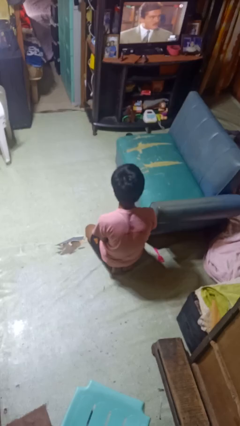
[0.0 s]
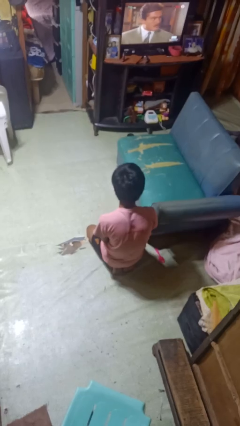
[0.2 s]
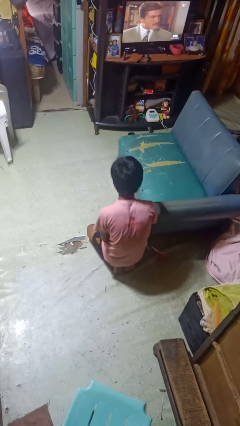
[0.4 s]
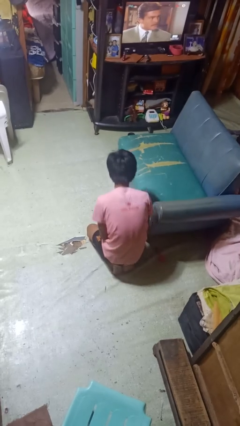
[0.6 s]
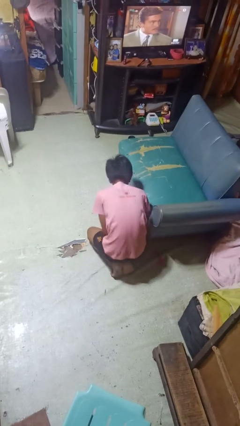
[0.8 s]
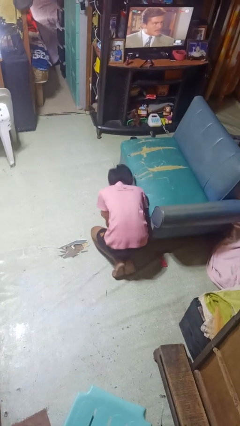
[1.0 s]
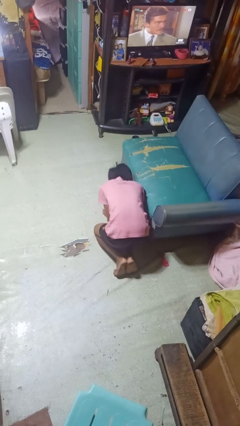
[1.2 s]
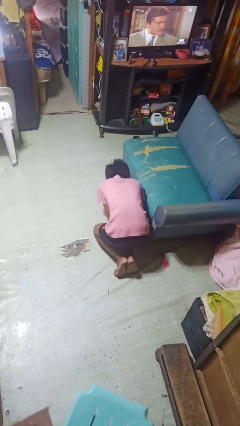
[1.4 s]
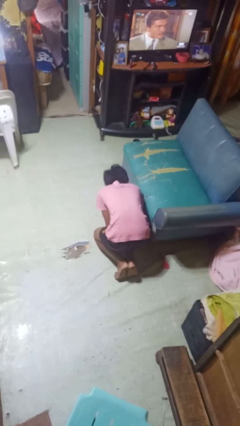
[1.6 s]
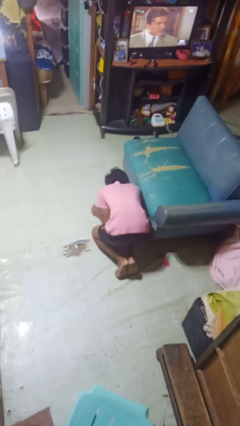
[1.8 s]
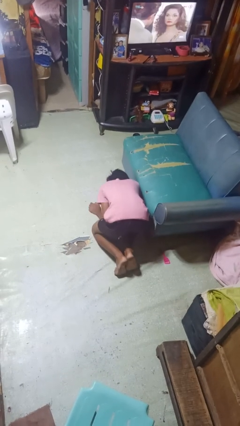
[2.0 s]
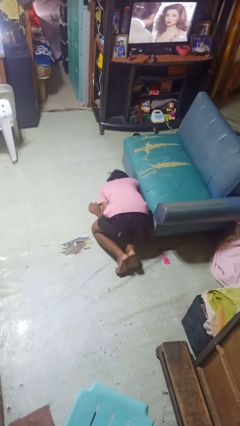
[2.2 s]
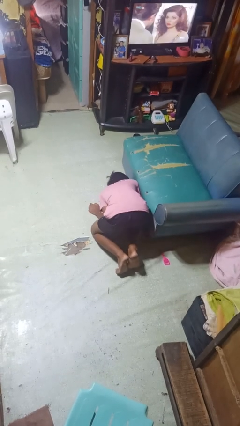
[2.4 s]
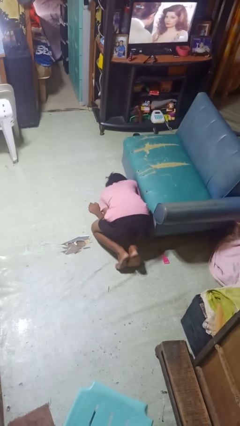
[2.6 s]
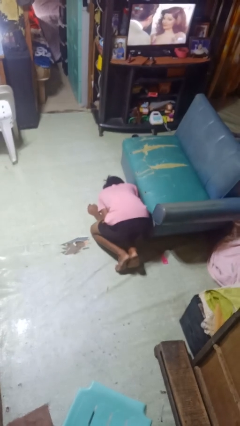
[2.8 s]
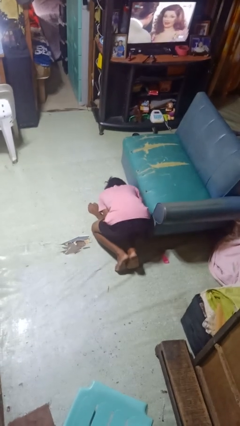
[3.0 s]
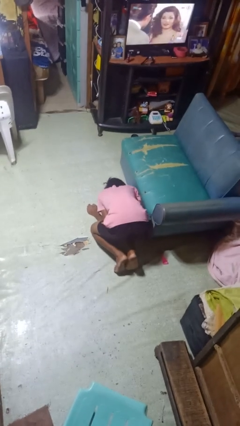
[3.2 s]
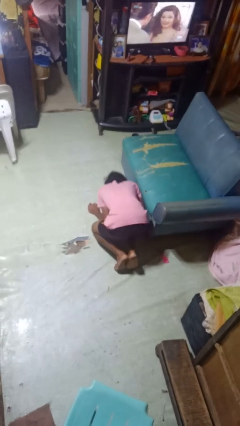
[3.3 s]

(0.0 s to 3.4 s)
person searches under couch

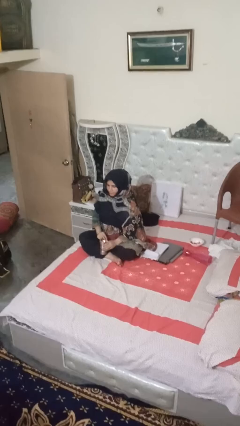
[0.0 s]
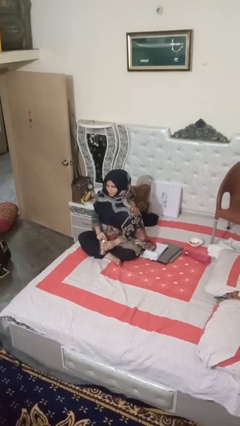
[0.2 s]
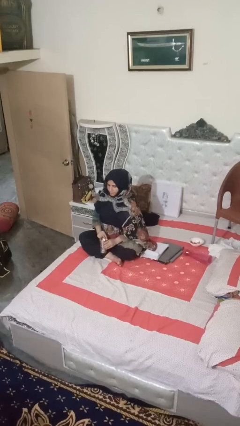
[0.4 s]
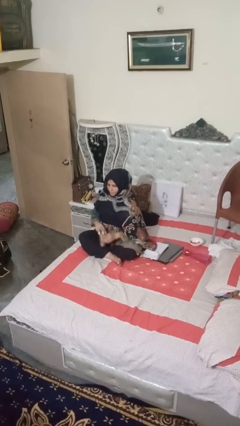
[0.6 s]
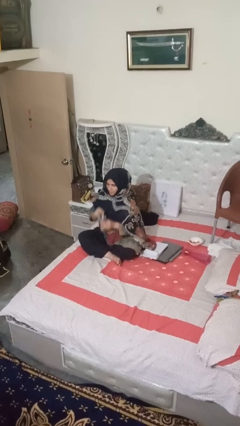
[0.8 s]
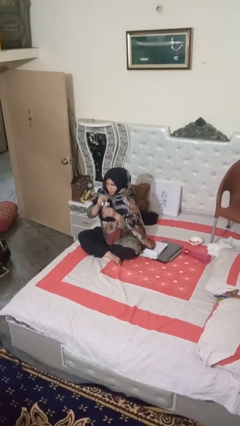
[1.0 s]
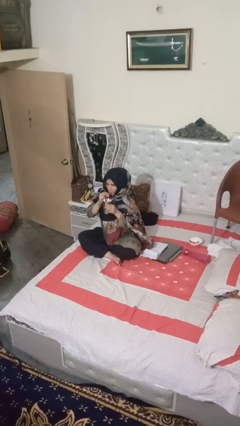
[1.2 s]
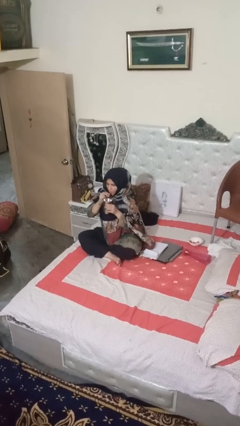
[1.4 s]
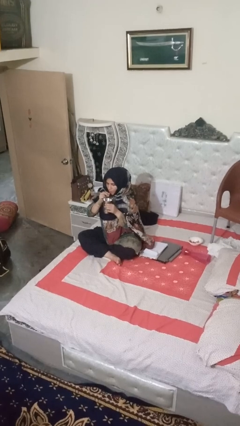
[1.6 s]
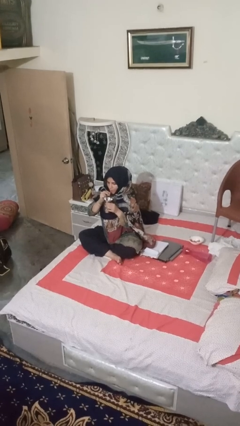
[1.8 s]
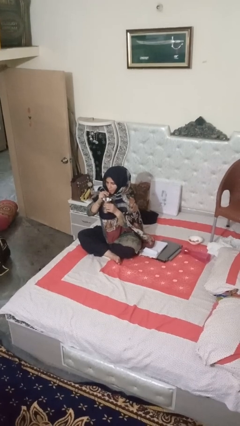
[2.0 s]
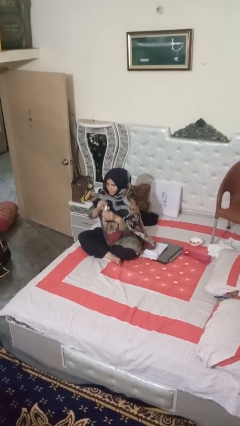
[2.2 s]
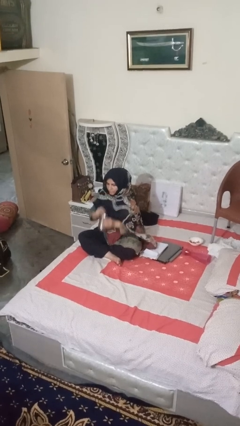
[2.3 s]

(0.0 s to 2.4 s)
person drinks from straw

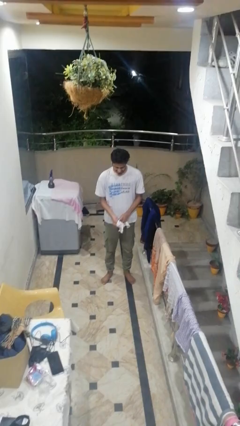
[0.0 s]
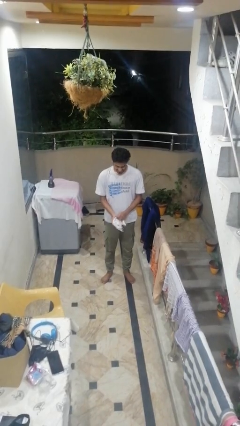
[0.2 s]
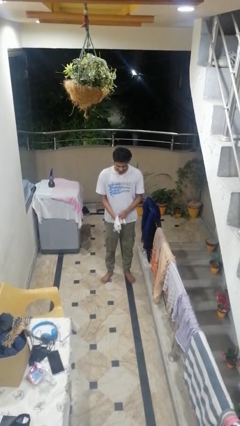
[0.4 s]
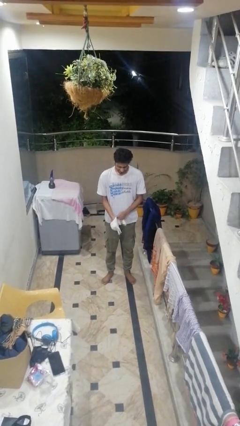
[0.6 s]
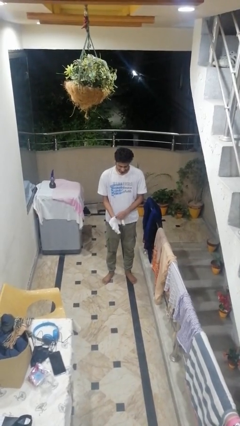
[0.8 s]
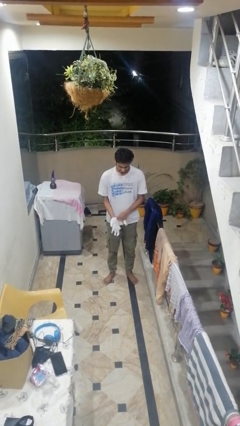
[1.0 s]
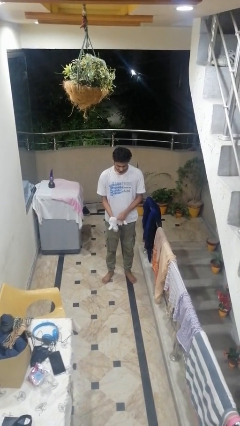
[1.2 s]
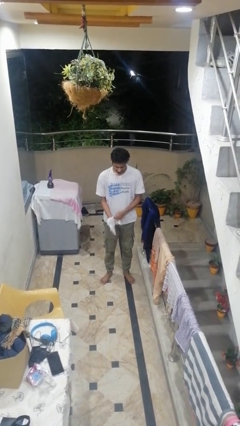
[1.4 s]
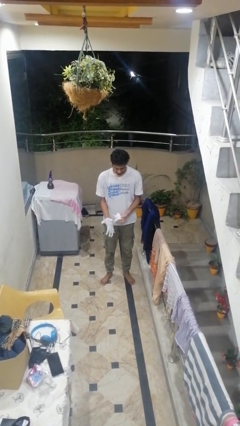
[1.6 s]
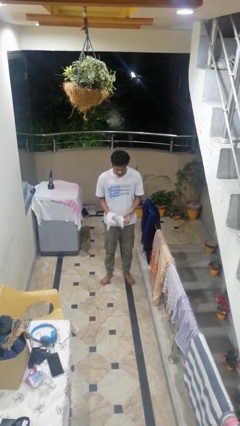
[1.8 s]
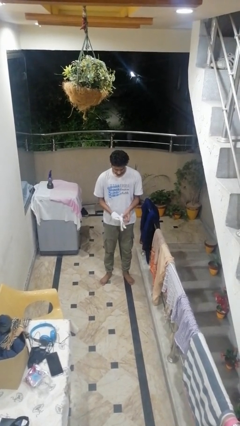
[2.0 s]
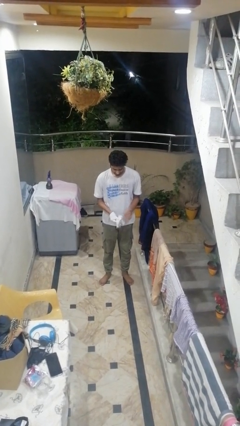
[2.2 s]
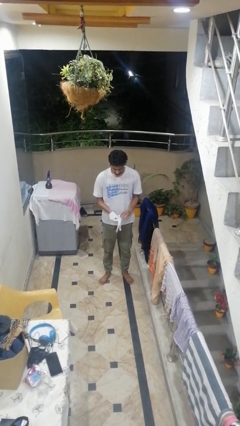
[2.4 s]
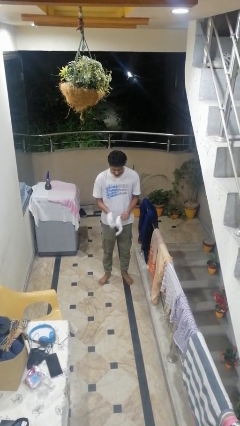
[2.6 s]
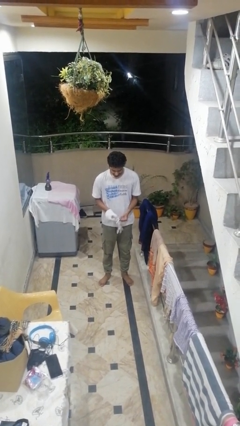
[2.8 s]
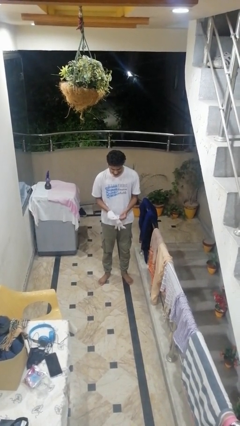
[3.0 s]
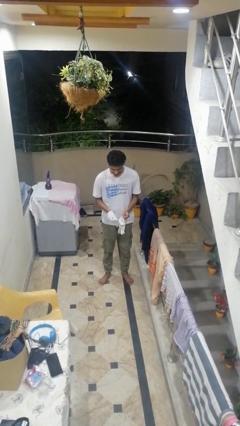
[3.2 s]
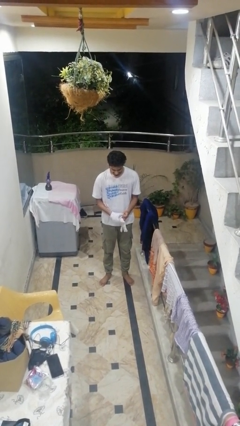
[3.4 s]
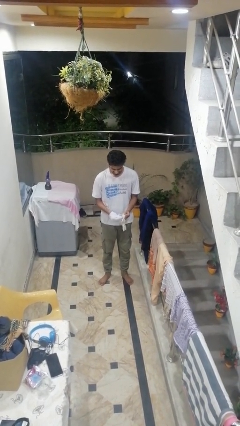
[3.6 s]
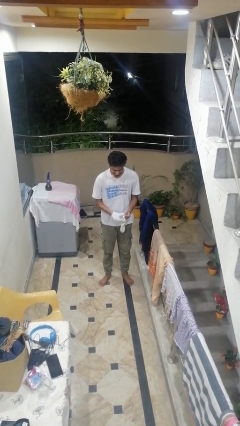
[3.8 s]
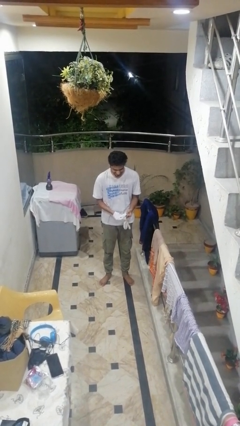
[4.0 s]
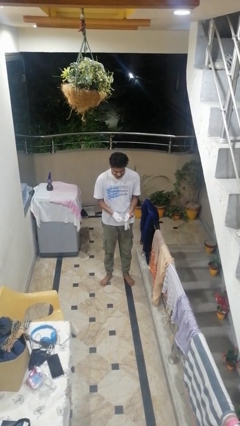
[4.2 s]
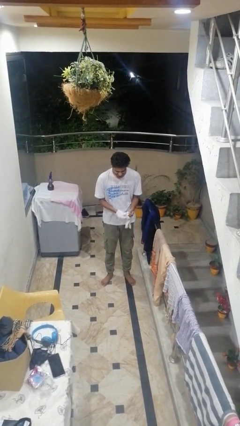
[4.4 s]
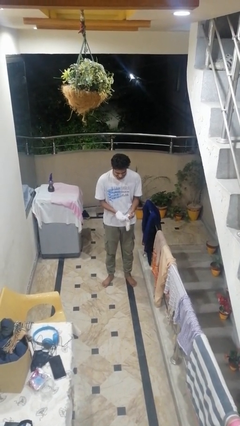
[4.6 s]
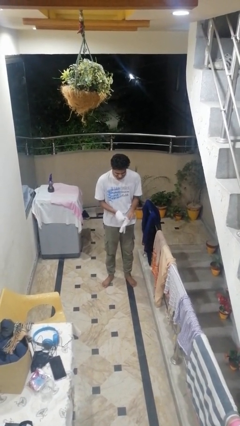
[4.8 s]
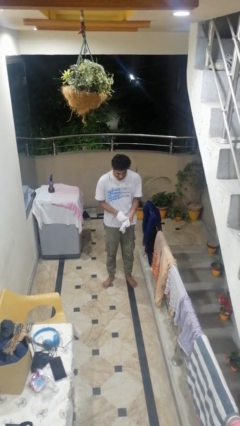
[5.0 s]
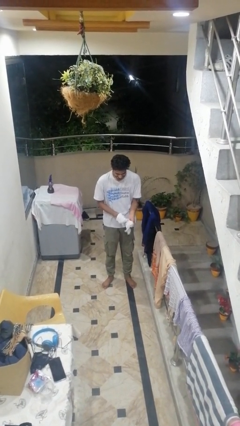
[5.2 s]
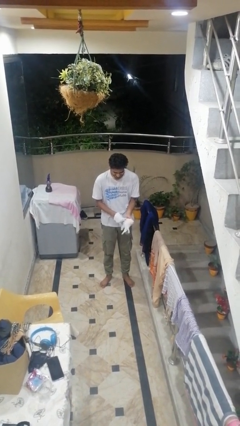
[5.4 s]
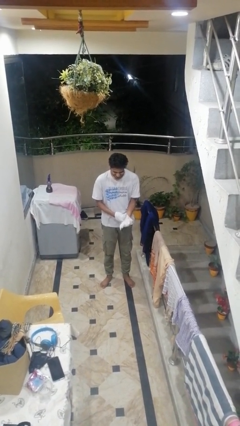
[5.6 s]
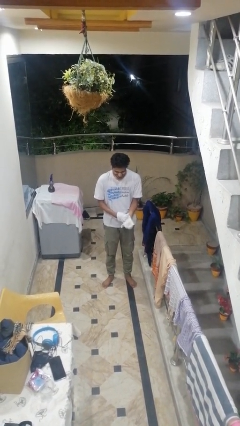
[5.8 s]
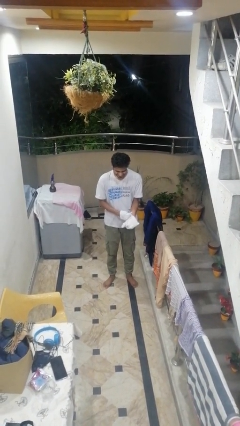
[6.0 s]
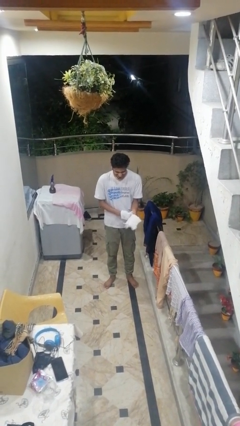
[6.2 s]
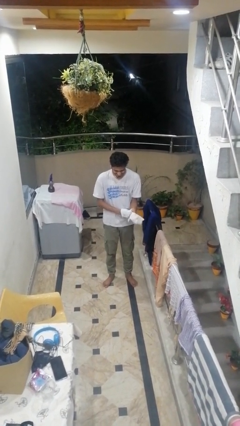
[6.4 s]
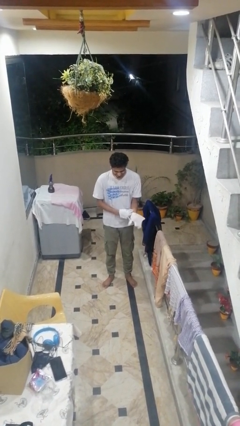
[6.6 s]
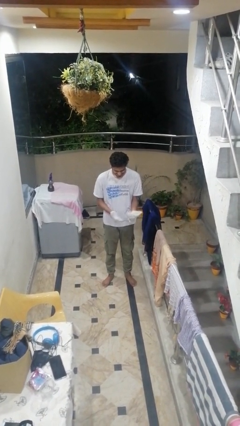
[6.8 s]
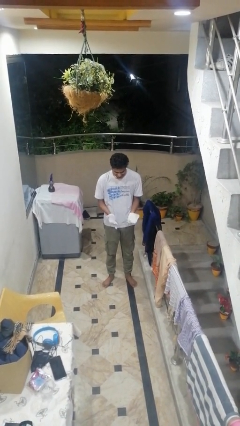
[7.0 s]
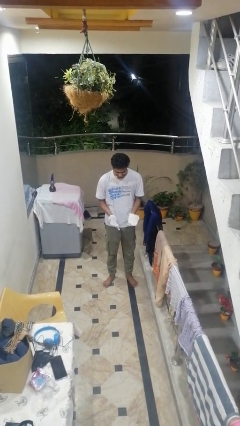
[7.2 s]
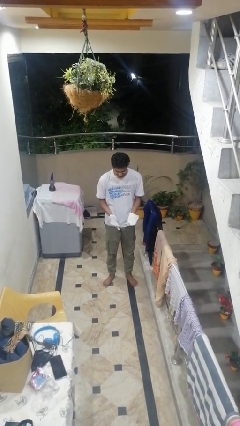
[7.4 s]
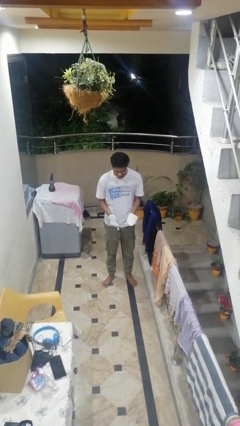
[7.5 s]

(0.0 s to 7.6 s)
person puts on gloves

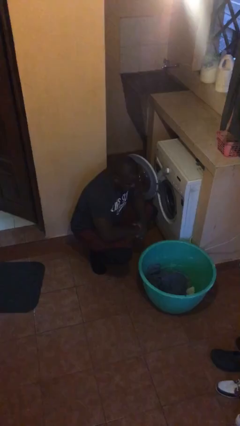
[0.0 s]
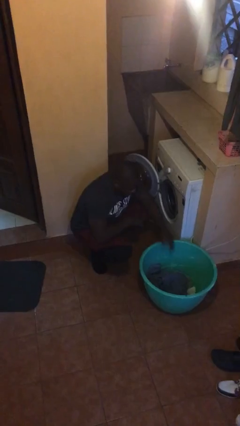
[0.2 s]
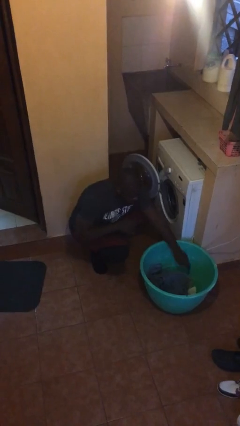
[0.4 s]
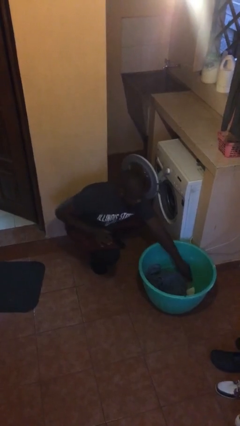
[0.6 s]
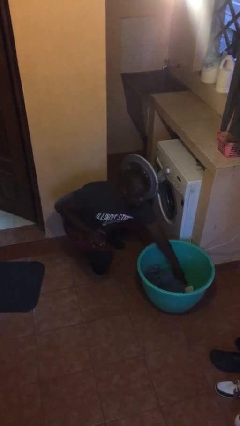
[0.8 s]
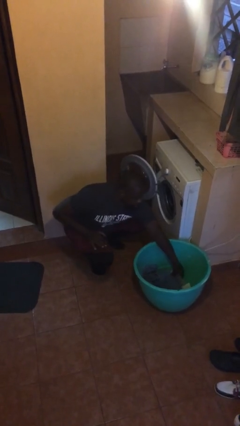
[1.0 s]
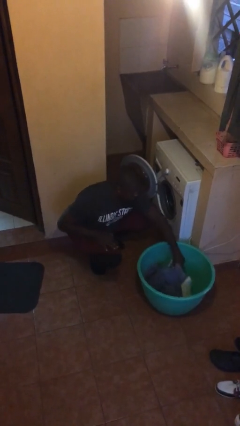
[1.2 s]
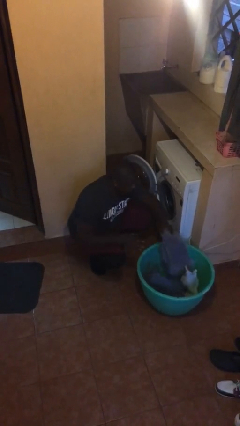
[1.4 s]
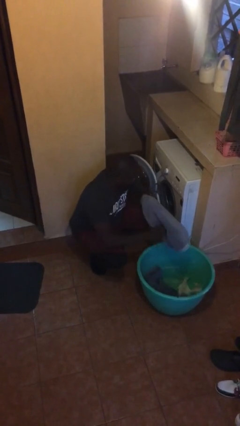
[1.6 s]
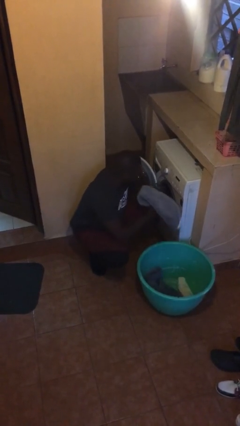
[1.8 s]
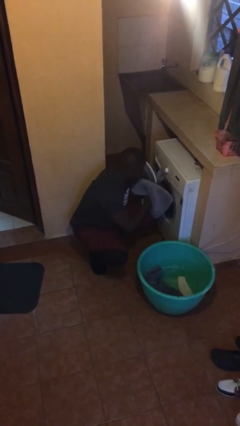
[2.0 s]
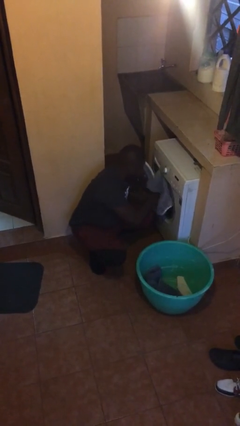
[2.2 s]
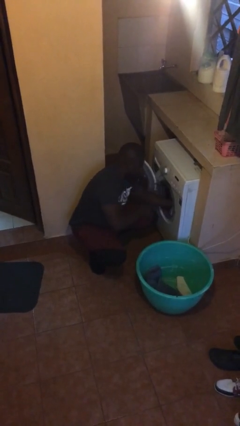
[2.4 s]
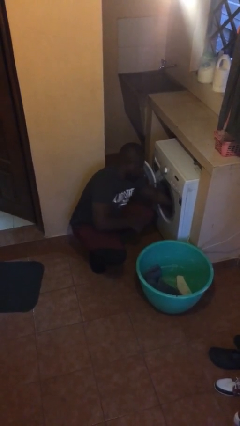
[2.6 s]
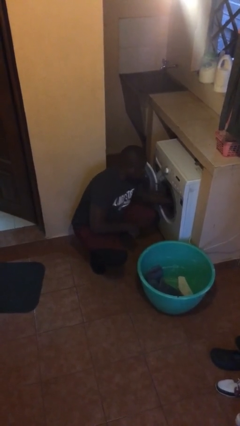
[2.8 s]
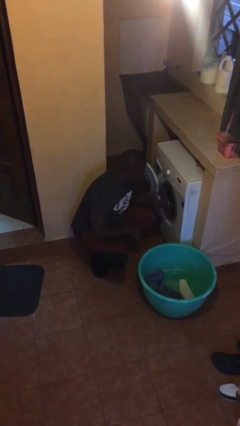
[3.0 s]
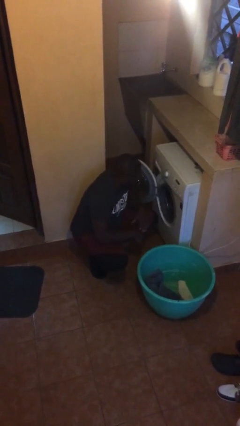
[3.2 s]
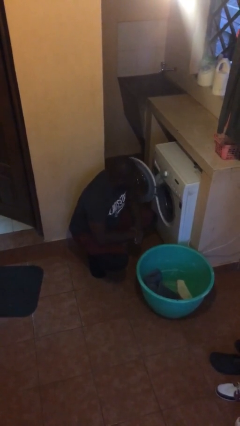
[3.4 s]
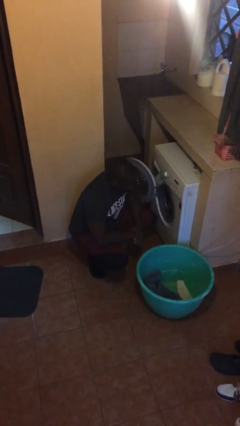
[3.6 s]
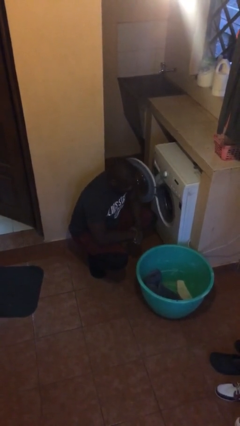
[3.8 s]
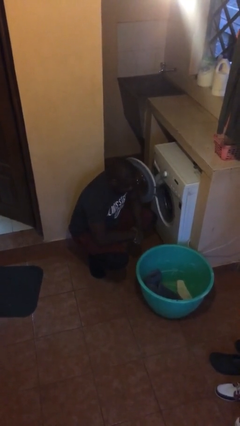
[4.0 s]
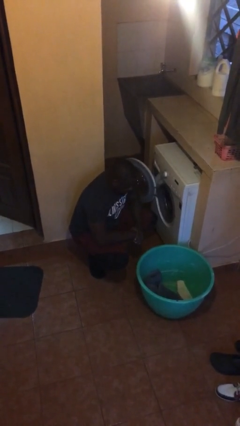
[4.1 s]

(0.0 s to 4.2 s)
person loads clotheswasher

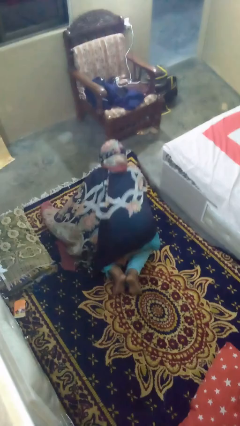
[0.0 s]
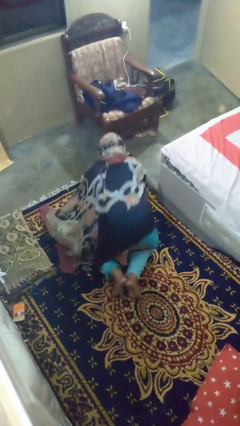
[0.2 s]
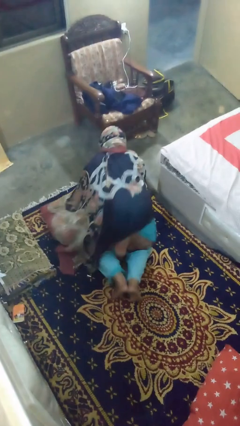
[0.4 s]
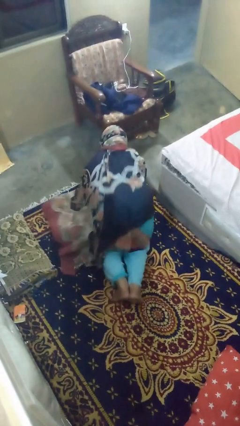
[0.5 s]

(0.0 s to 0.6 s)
person exercises with pushup
